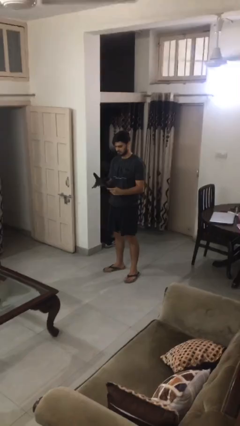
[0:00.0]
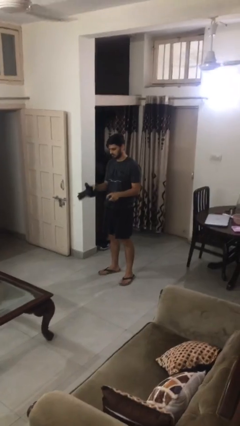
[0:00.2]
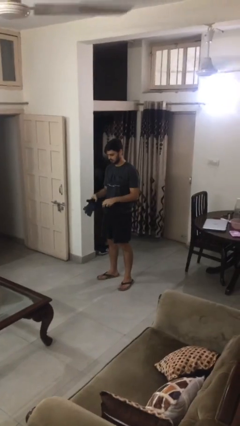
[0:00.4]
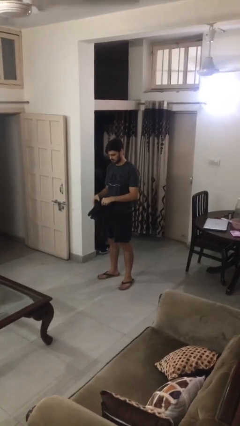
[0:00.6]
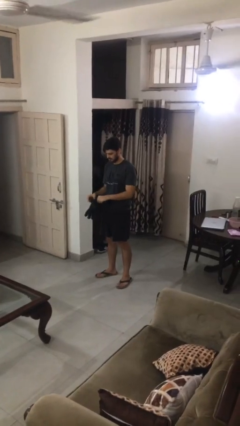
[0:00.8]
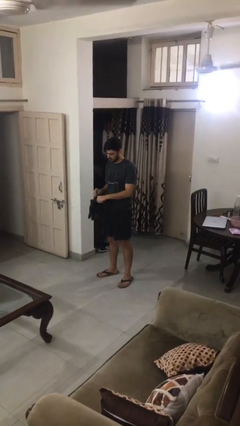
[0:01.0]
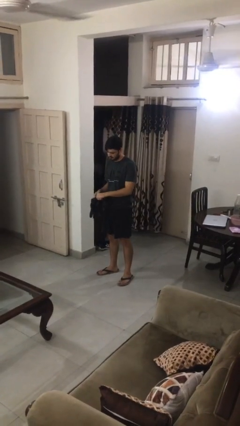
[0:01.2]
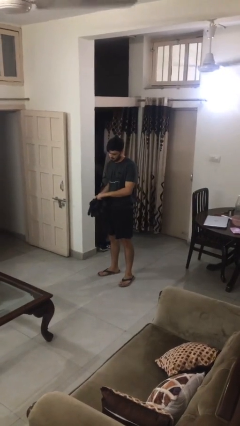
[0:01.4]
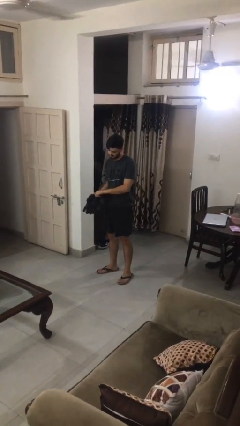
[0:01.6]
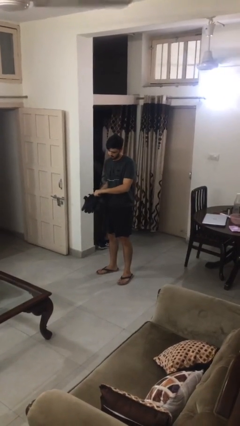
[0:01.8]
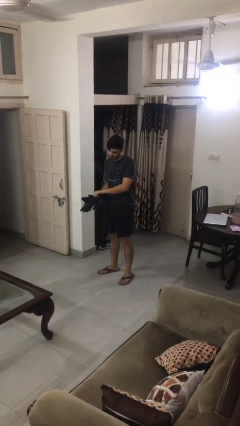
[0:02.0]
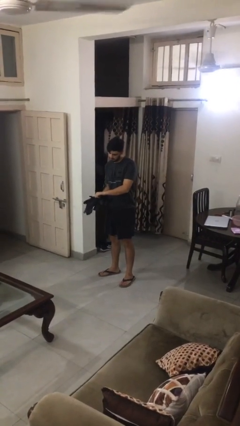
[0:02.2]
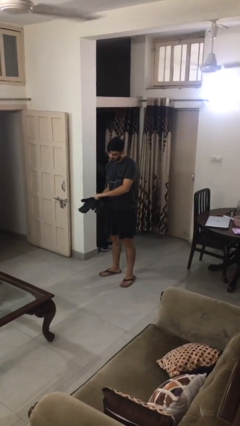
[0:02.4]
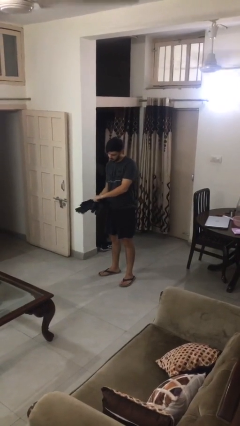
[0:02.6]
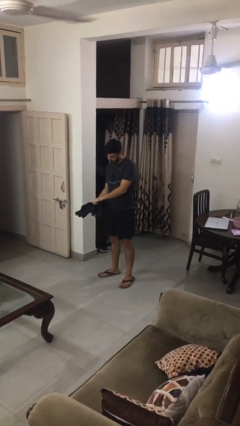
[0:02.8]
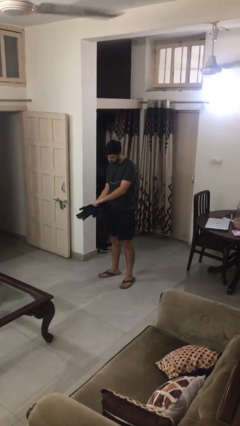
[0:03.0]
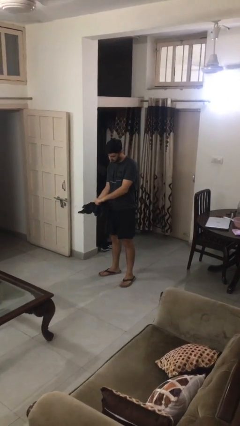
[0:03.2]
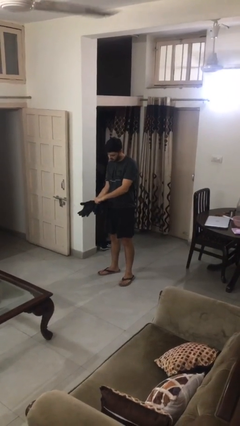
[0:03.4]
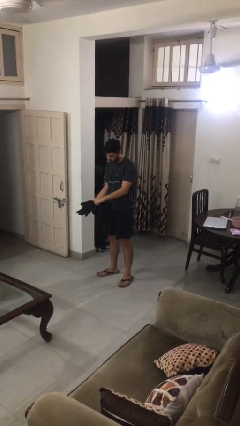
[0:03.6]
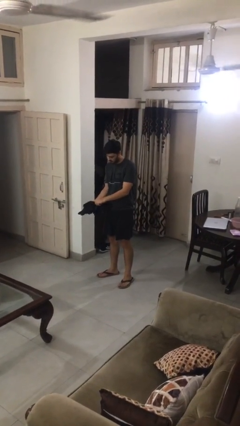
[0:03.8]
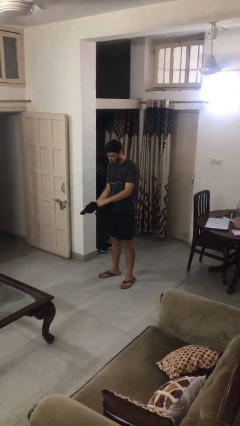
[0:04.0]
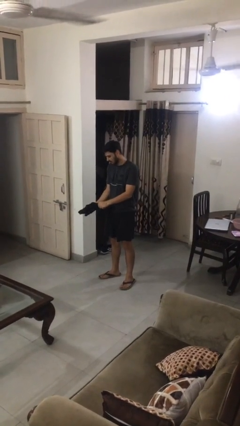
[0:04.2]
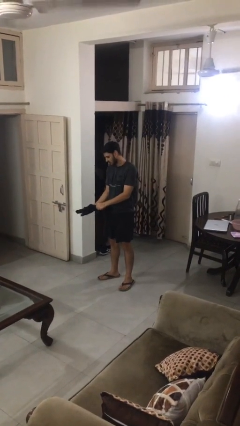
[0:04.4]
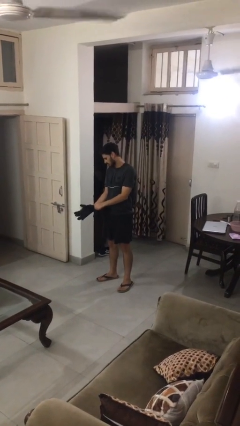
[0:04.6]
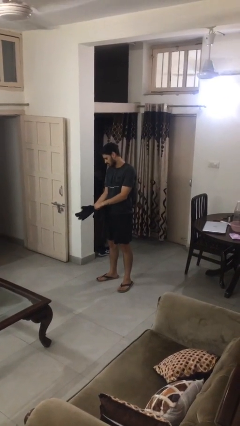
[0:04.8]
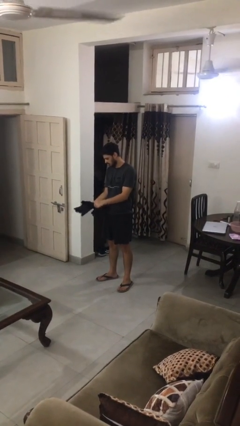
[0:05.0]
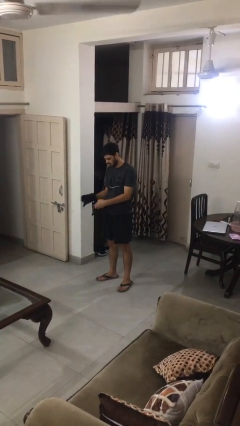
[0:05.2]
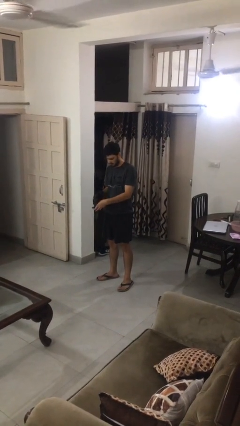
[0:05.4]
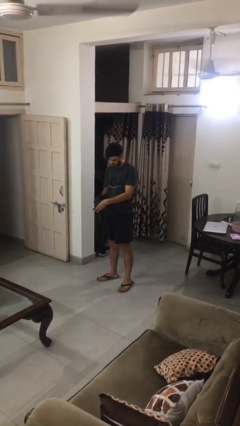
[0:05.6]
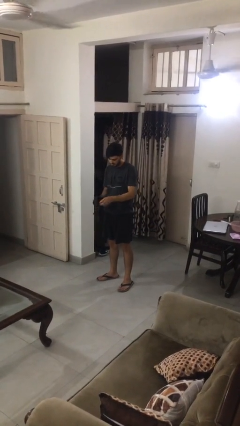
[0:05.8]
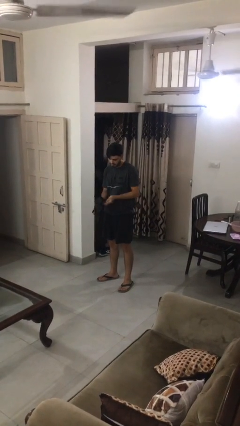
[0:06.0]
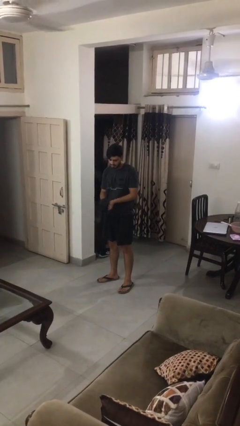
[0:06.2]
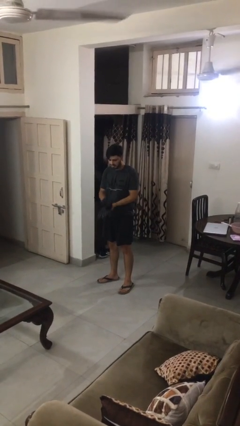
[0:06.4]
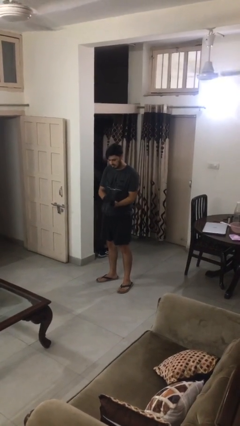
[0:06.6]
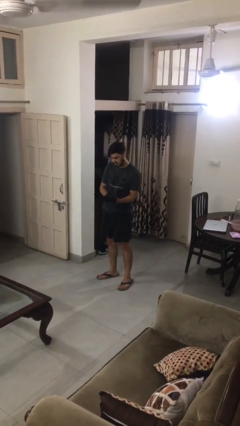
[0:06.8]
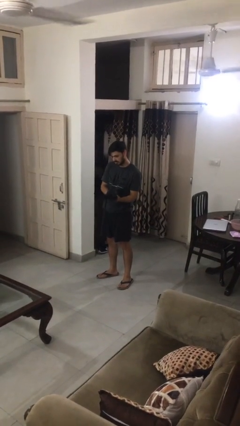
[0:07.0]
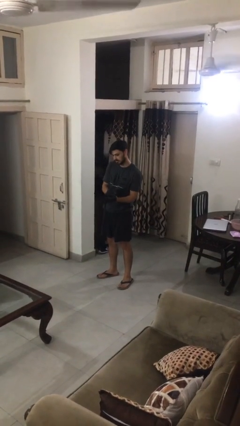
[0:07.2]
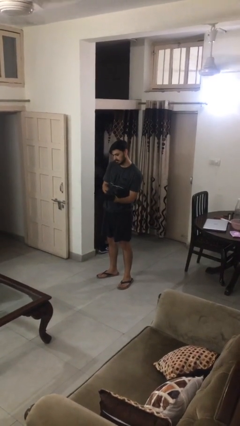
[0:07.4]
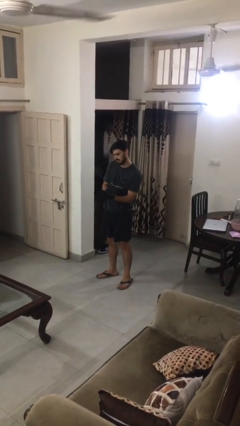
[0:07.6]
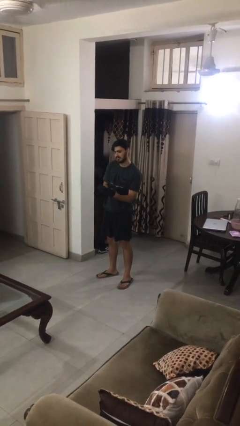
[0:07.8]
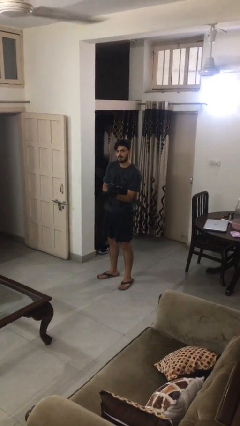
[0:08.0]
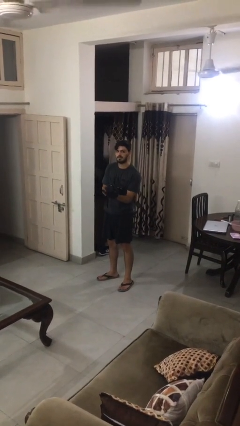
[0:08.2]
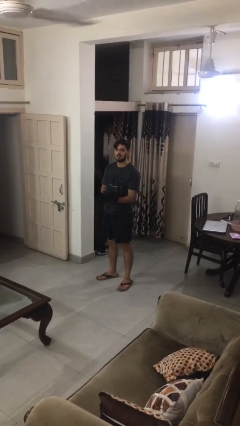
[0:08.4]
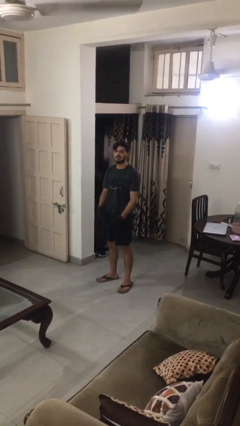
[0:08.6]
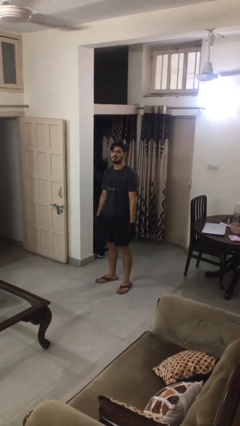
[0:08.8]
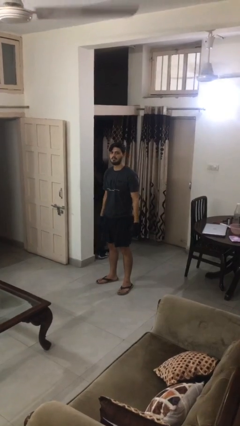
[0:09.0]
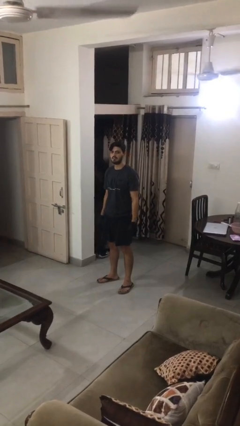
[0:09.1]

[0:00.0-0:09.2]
person puts on gloves

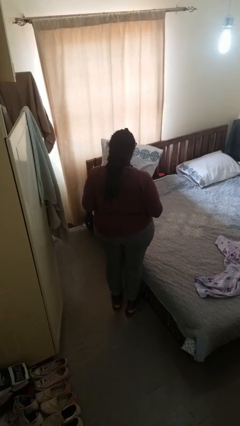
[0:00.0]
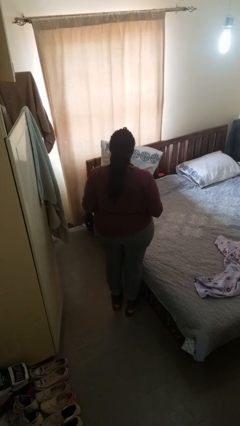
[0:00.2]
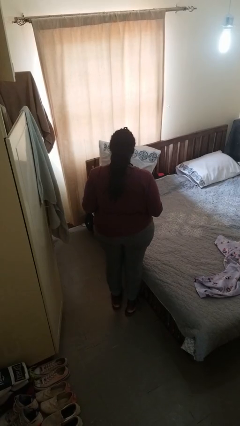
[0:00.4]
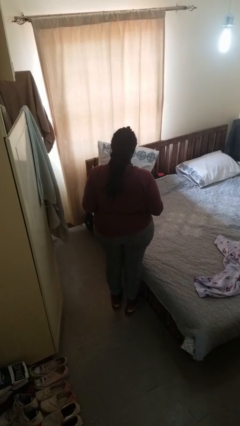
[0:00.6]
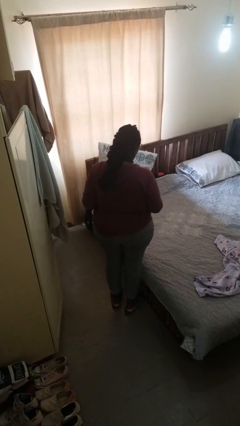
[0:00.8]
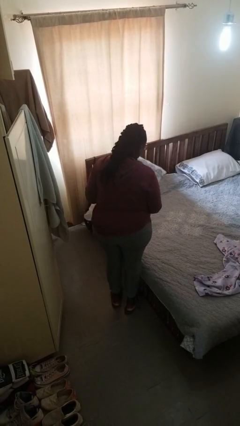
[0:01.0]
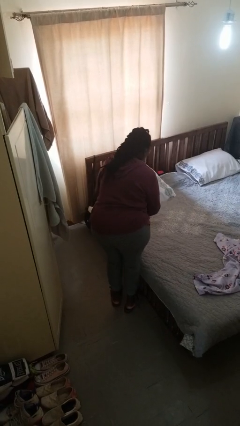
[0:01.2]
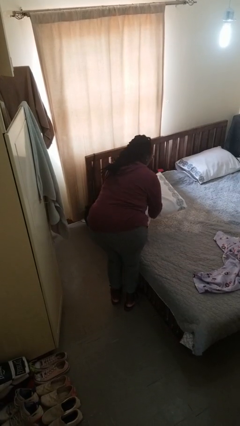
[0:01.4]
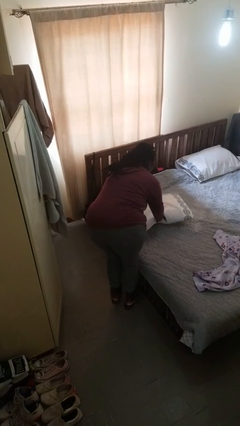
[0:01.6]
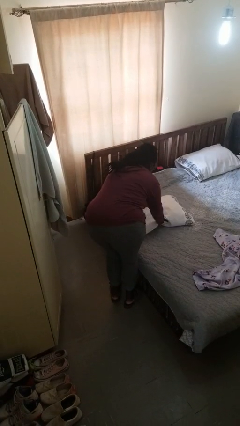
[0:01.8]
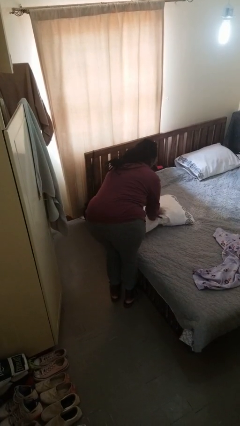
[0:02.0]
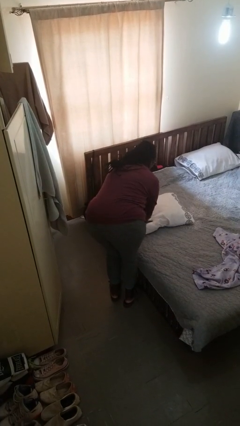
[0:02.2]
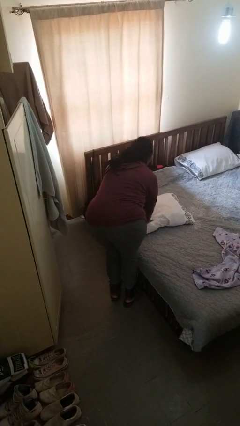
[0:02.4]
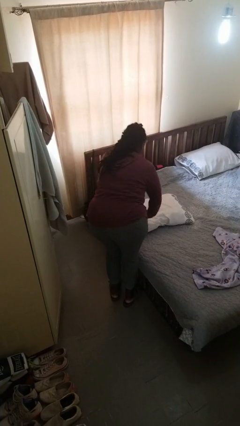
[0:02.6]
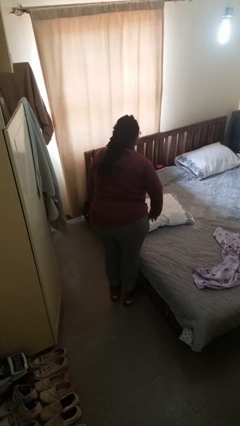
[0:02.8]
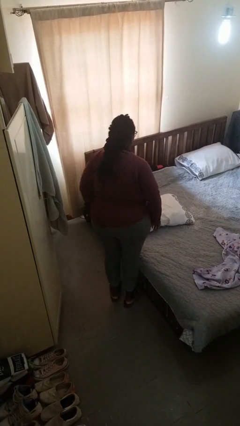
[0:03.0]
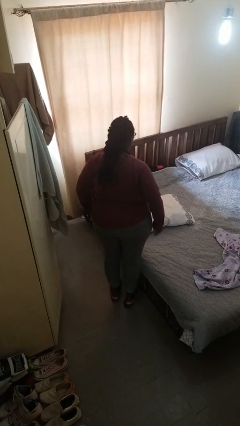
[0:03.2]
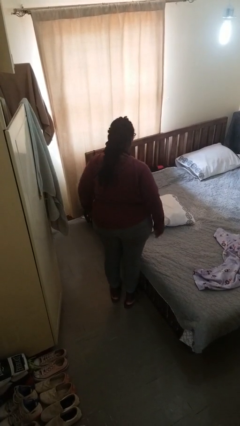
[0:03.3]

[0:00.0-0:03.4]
person puts down object on bed

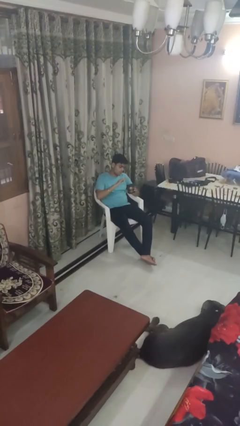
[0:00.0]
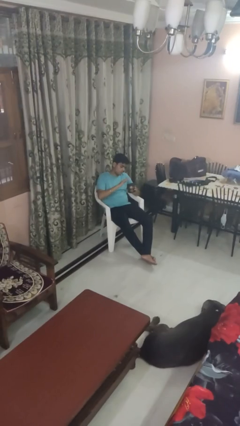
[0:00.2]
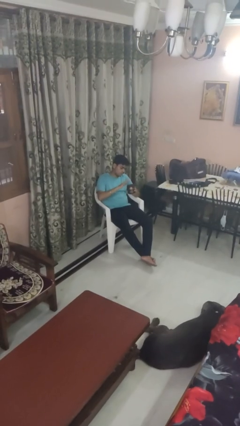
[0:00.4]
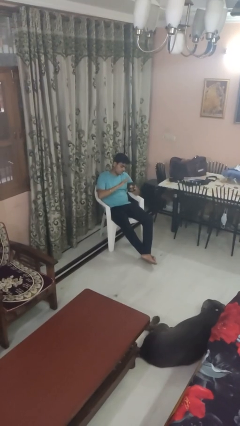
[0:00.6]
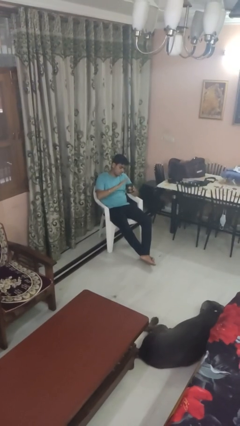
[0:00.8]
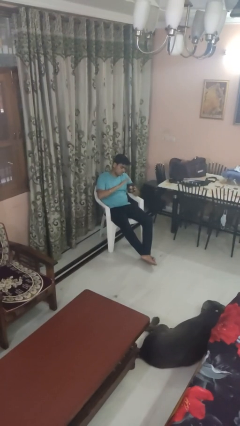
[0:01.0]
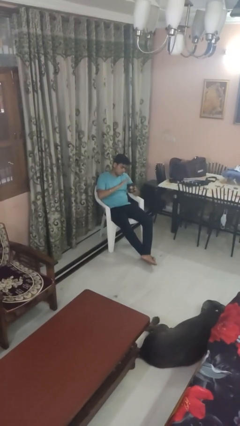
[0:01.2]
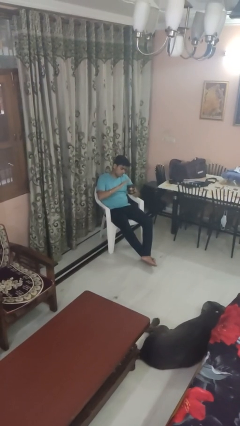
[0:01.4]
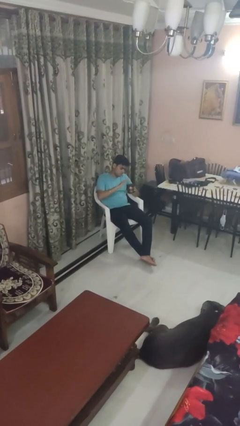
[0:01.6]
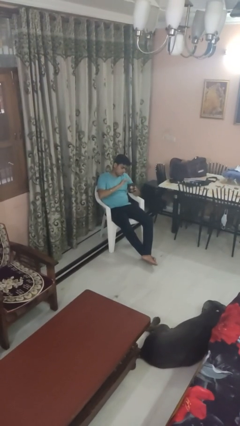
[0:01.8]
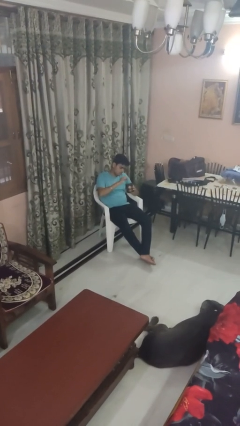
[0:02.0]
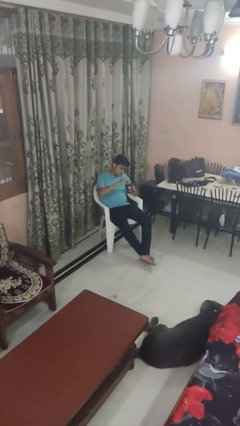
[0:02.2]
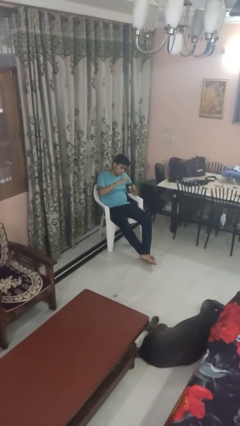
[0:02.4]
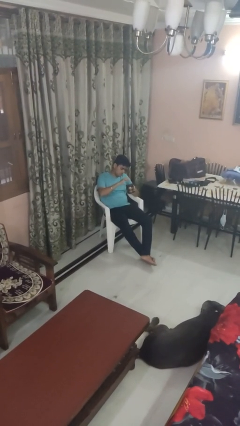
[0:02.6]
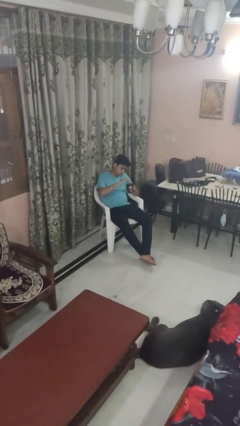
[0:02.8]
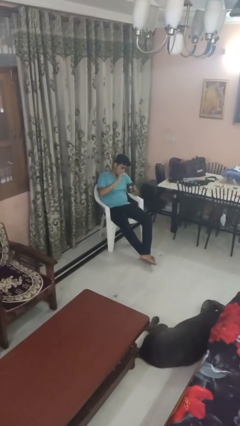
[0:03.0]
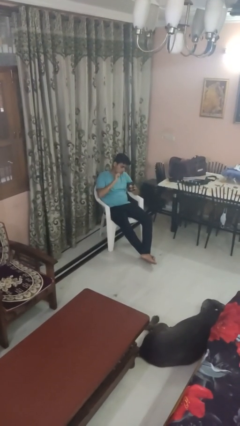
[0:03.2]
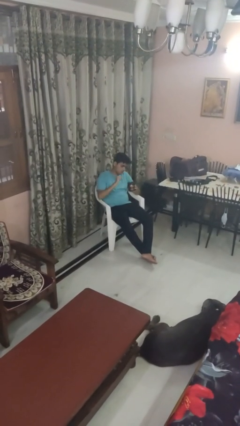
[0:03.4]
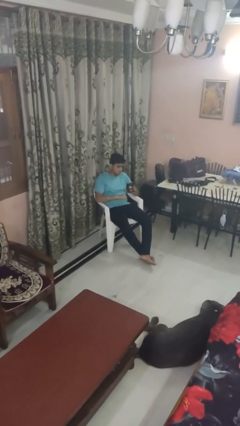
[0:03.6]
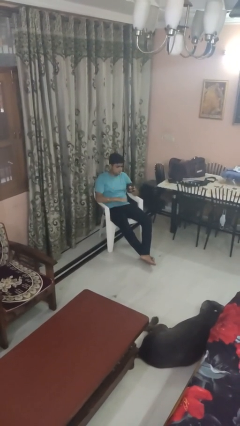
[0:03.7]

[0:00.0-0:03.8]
person taps object with finger

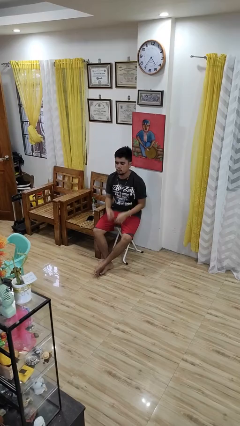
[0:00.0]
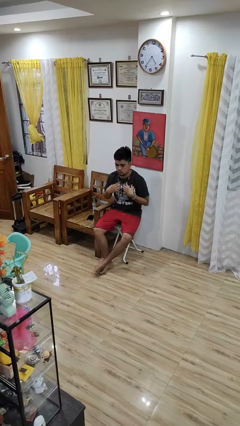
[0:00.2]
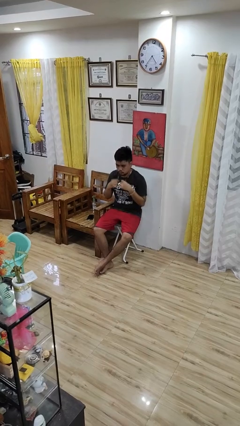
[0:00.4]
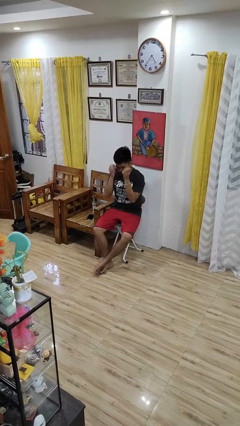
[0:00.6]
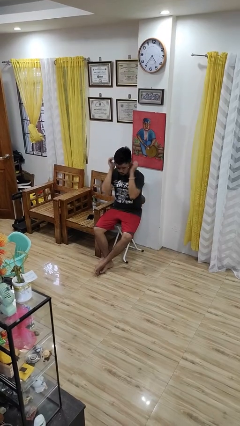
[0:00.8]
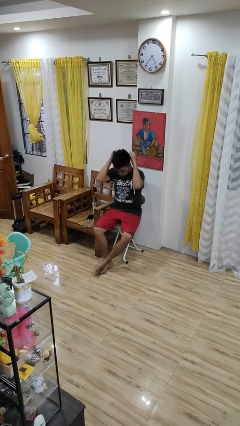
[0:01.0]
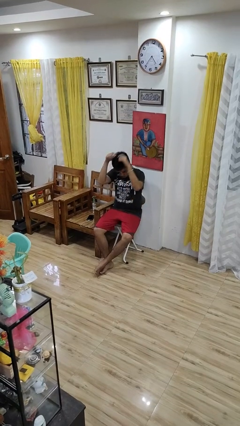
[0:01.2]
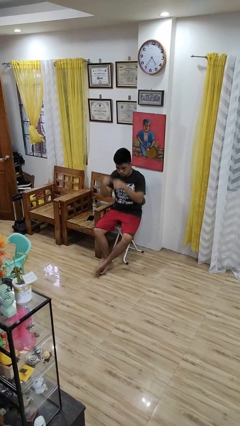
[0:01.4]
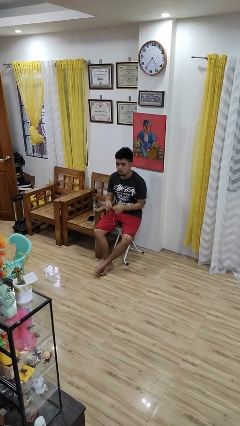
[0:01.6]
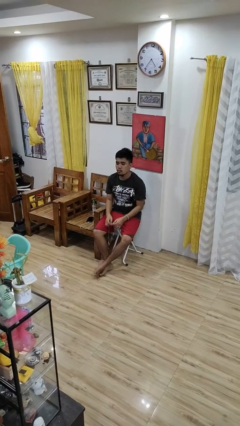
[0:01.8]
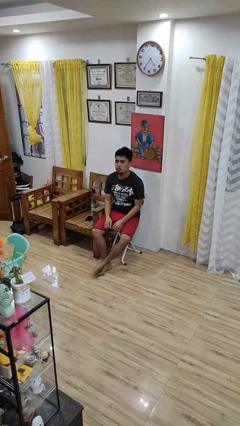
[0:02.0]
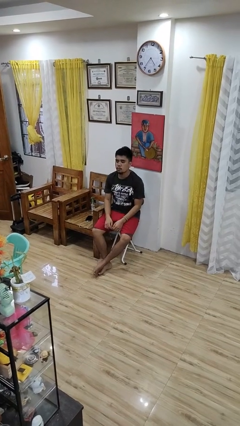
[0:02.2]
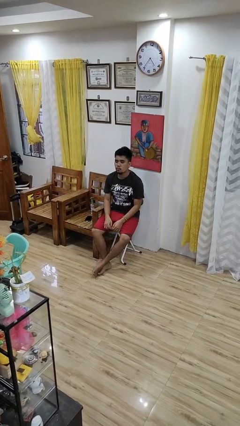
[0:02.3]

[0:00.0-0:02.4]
person takes off necklace
